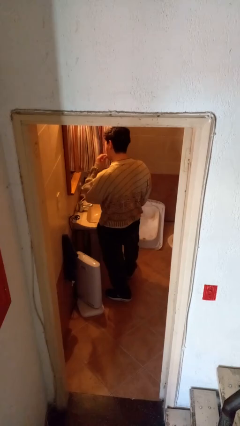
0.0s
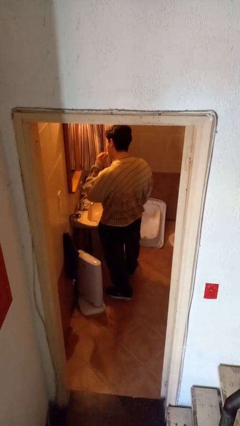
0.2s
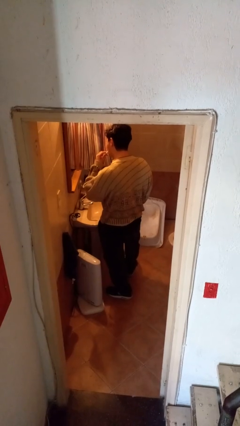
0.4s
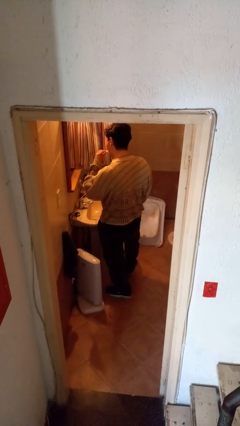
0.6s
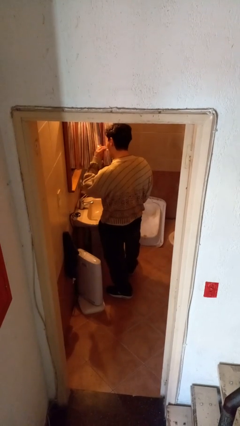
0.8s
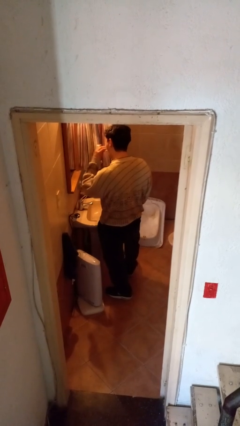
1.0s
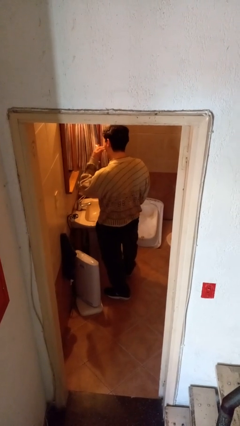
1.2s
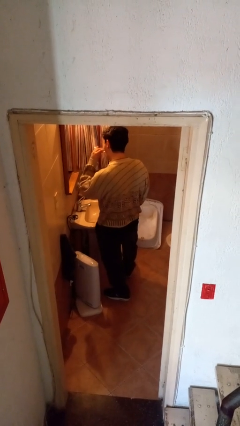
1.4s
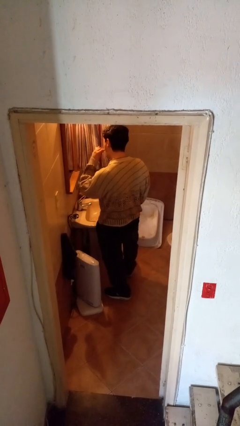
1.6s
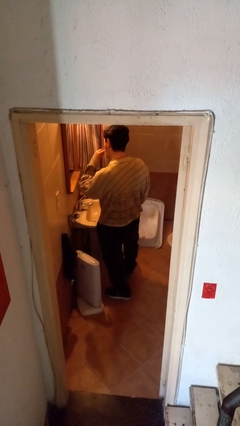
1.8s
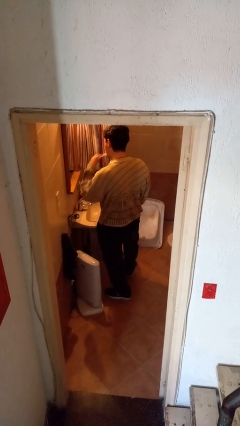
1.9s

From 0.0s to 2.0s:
person brushes teeth

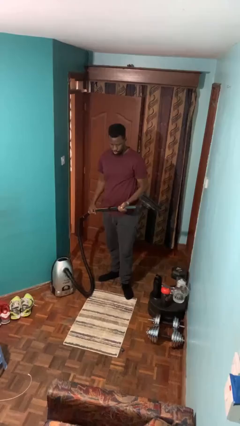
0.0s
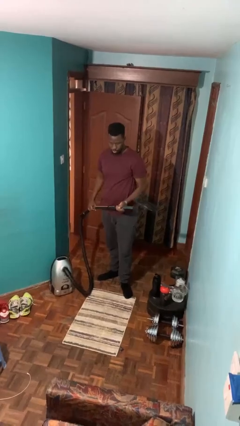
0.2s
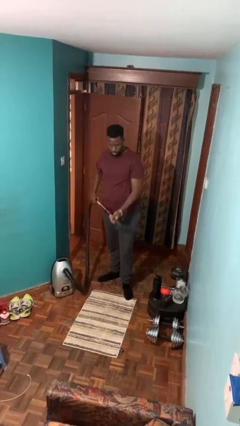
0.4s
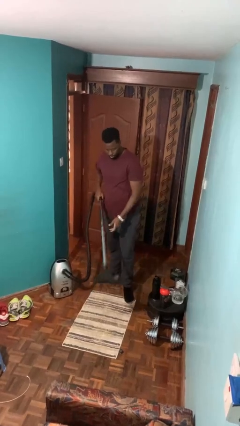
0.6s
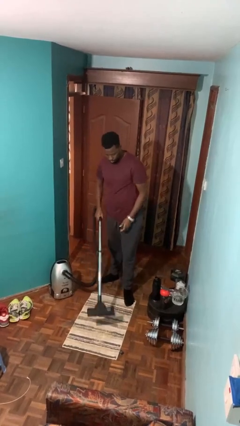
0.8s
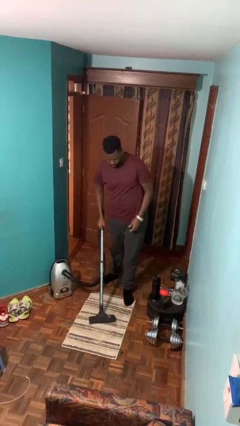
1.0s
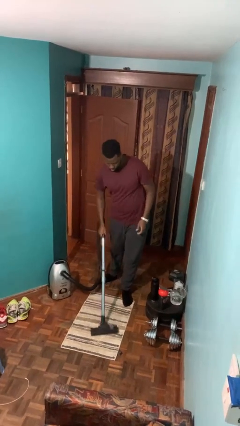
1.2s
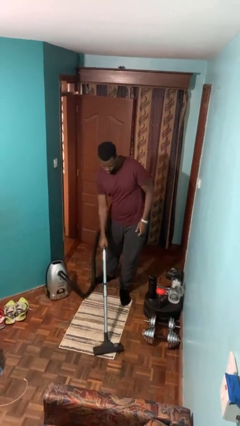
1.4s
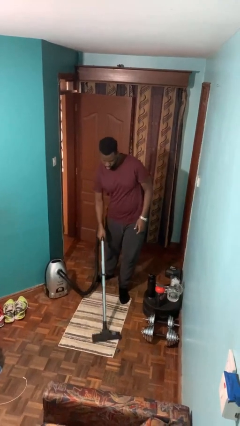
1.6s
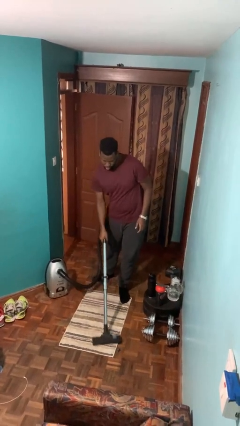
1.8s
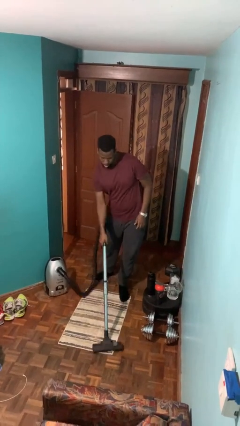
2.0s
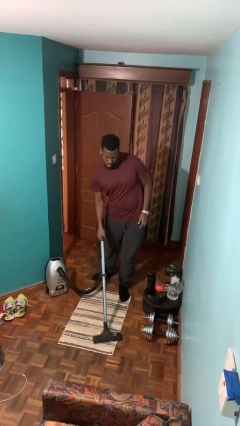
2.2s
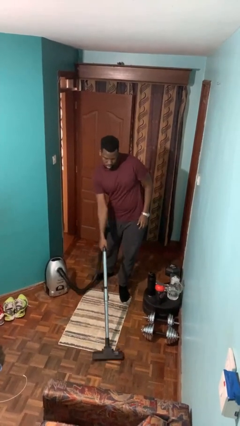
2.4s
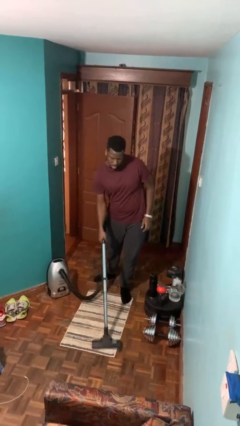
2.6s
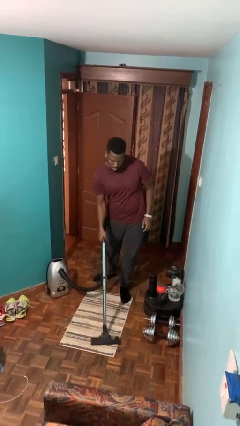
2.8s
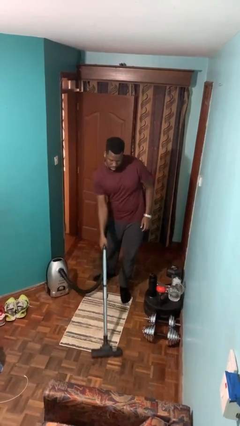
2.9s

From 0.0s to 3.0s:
person vacuums carpet

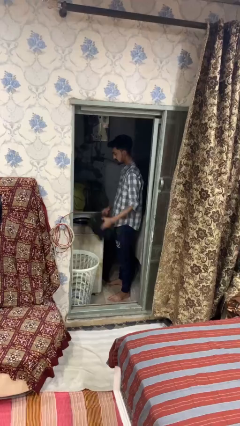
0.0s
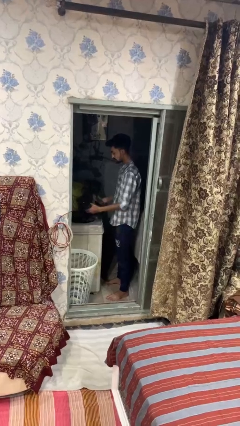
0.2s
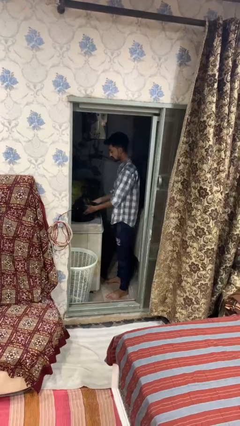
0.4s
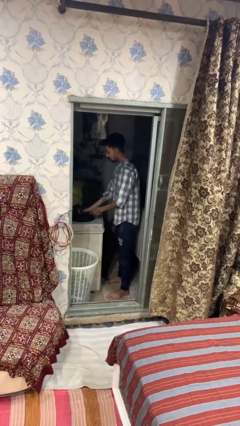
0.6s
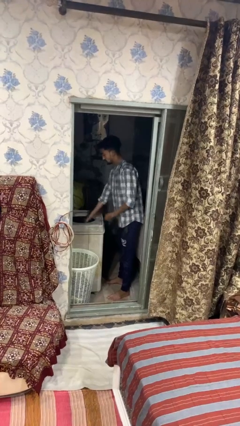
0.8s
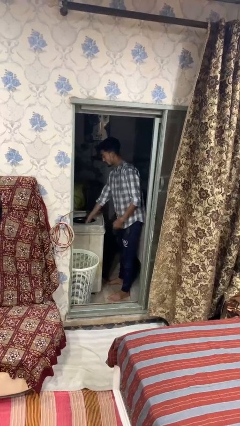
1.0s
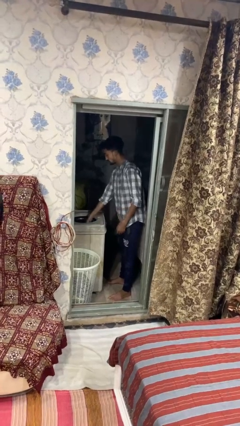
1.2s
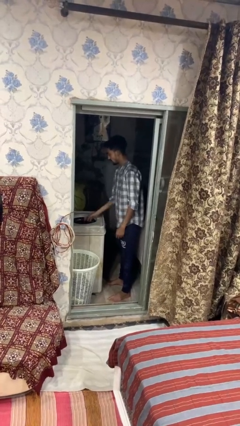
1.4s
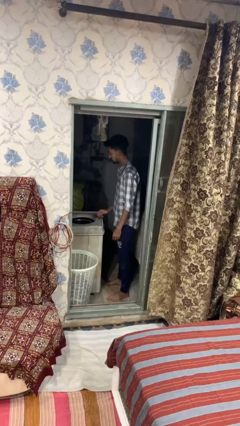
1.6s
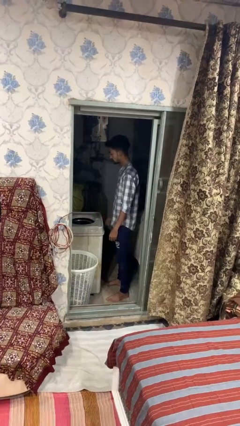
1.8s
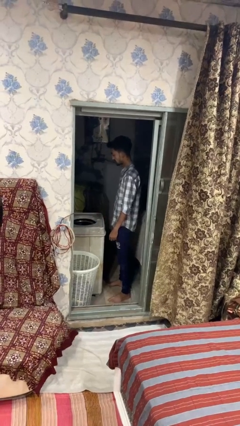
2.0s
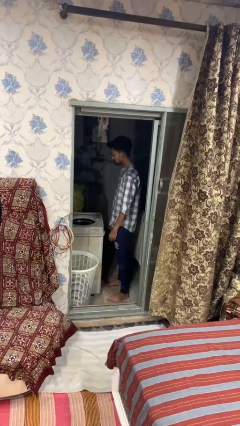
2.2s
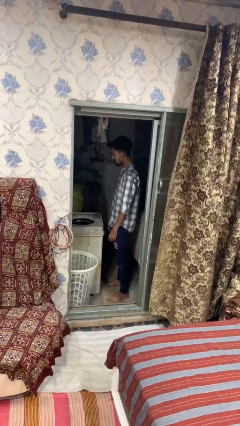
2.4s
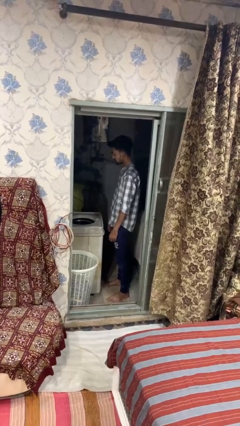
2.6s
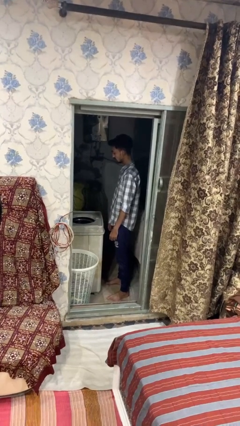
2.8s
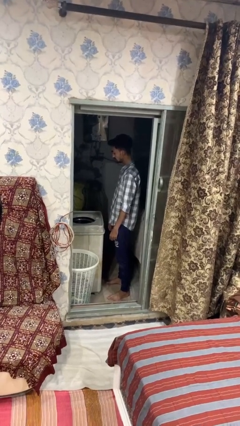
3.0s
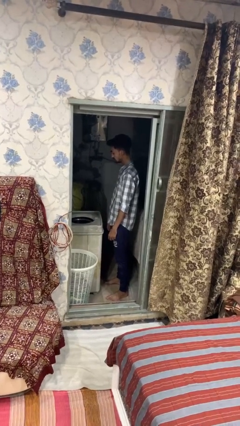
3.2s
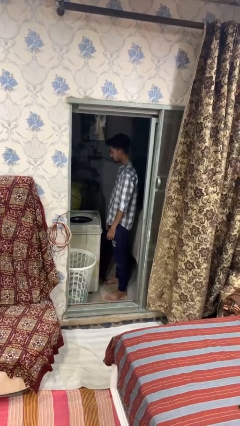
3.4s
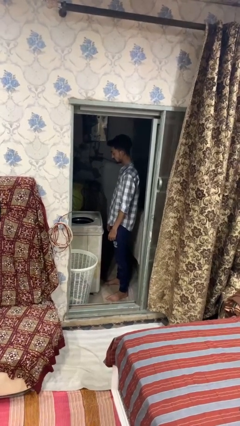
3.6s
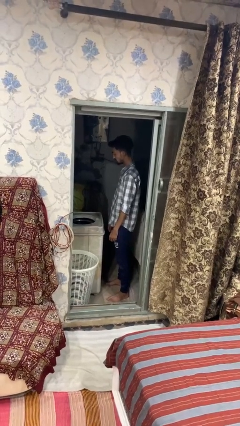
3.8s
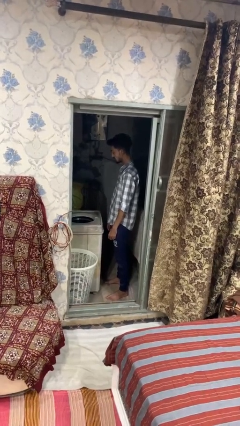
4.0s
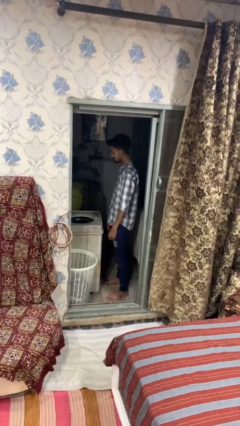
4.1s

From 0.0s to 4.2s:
person loads dryer

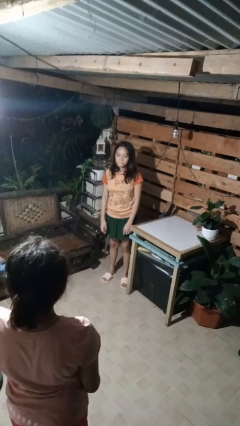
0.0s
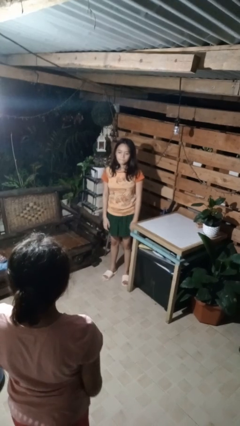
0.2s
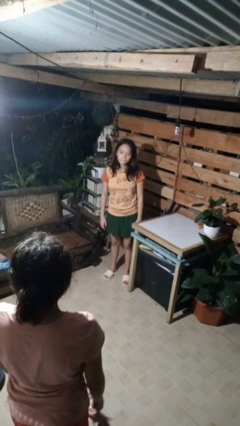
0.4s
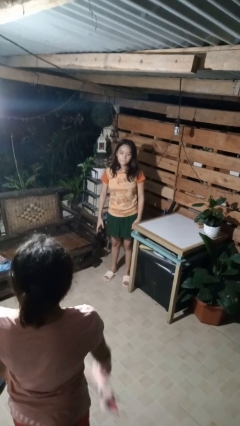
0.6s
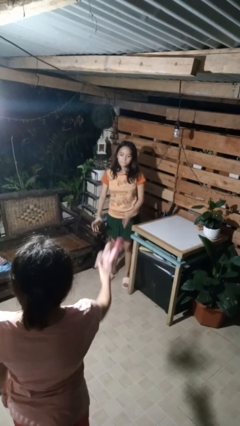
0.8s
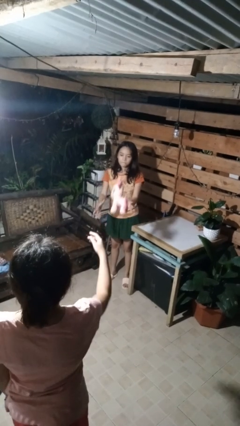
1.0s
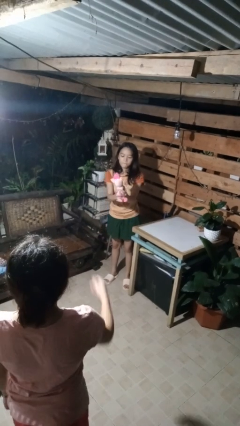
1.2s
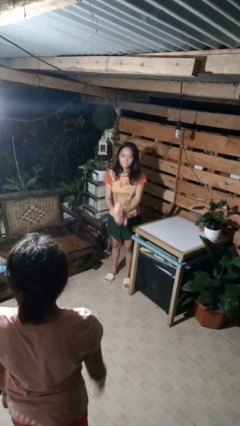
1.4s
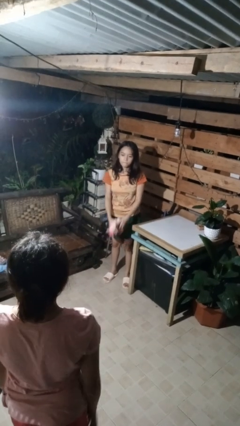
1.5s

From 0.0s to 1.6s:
person catches object from person

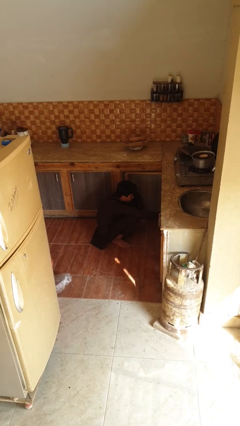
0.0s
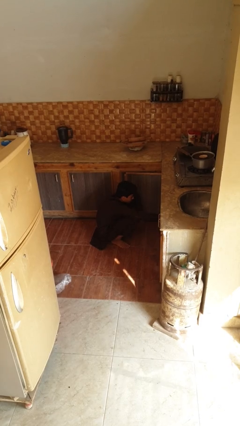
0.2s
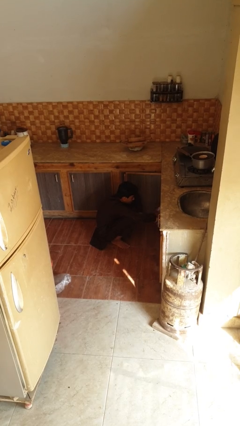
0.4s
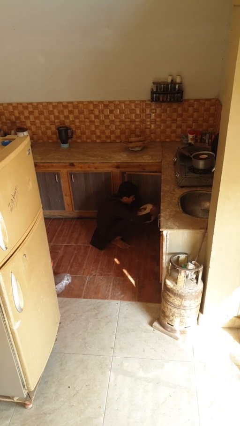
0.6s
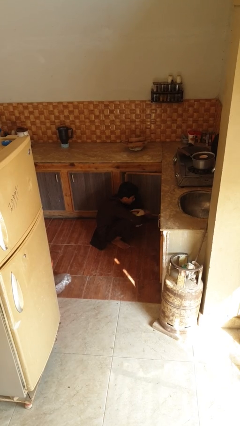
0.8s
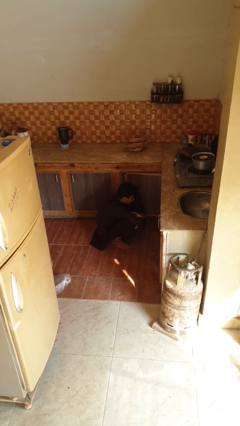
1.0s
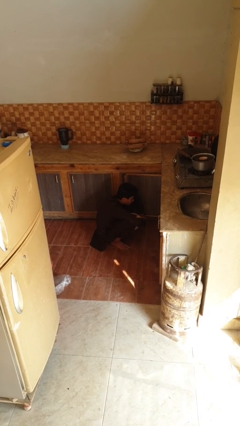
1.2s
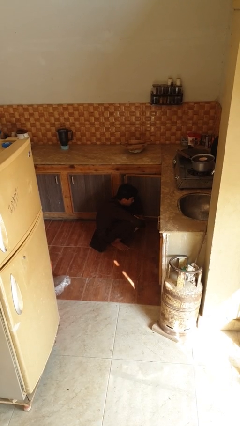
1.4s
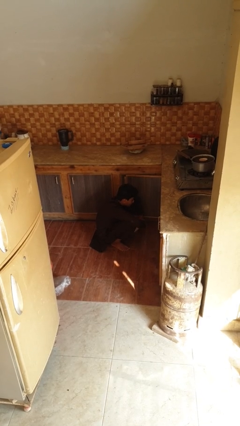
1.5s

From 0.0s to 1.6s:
person takes object from kitchen drawer

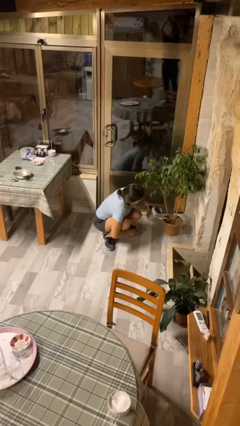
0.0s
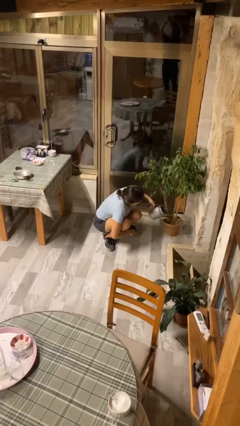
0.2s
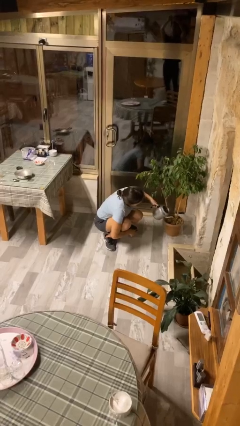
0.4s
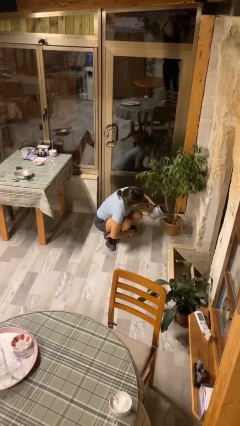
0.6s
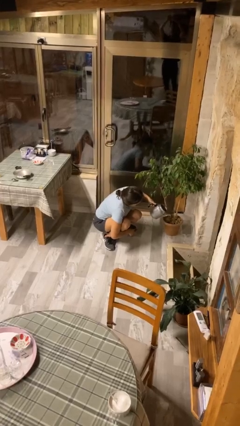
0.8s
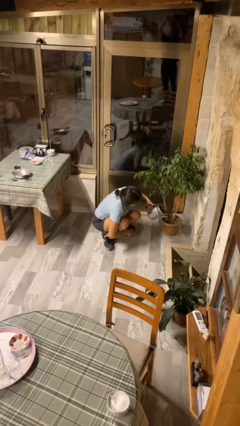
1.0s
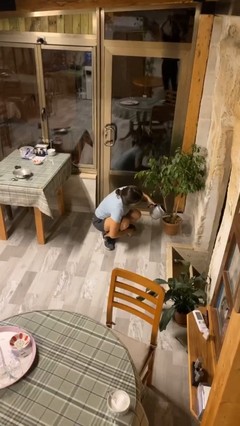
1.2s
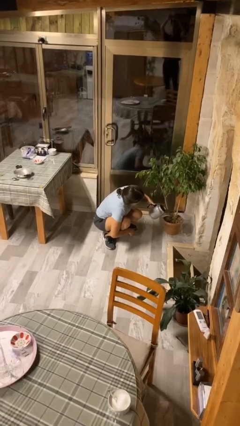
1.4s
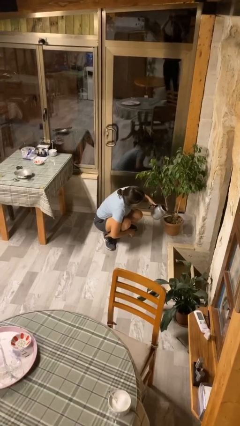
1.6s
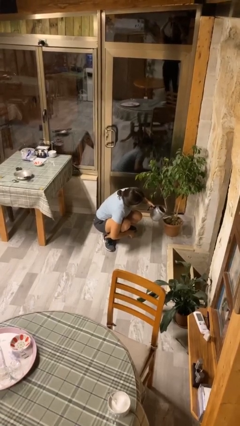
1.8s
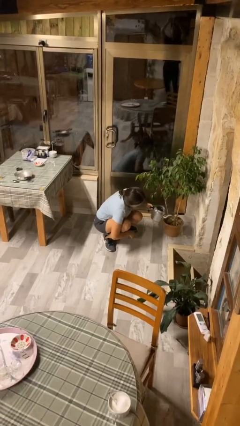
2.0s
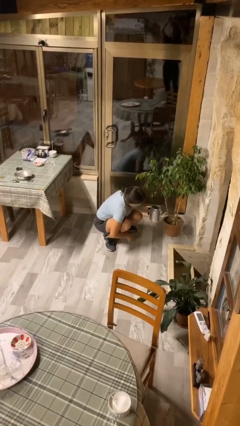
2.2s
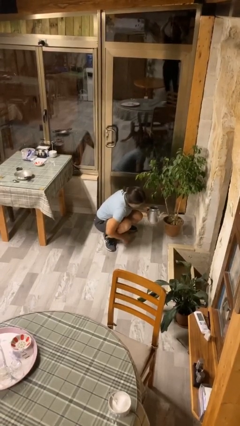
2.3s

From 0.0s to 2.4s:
person waters houseplant

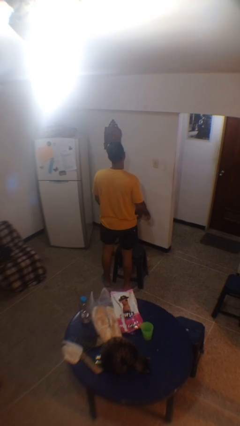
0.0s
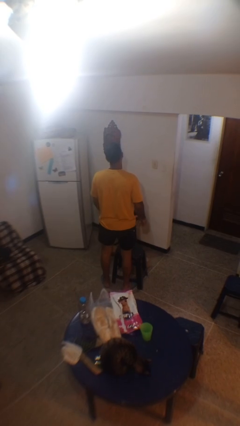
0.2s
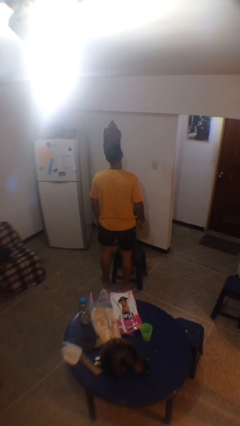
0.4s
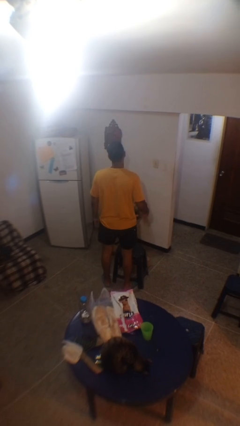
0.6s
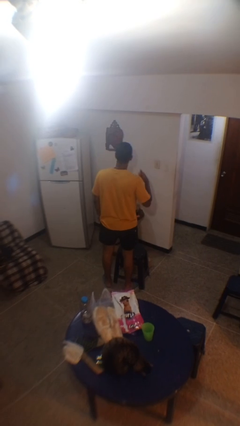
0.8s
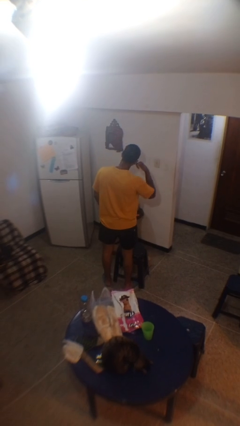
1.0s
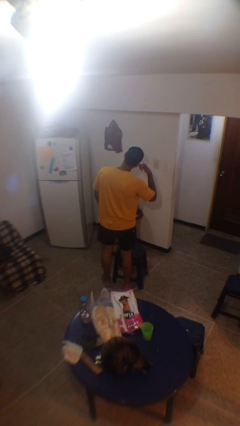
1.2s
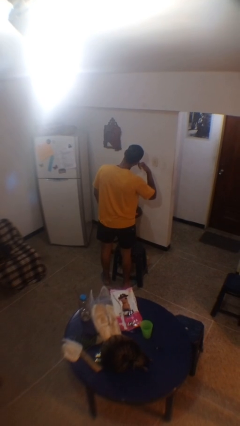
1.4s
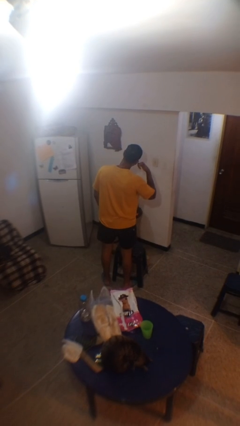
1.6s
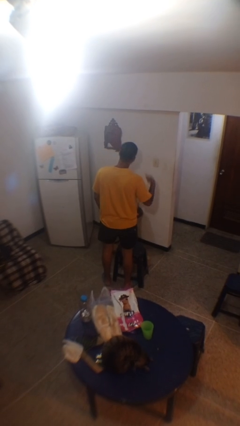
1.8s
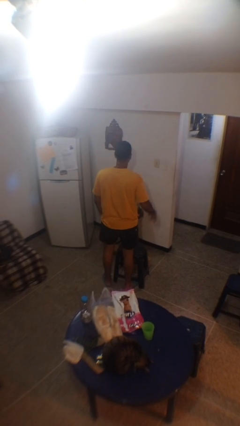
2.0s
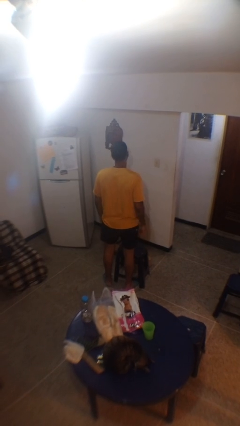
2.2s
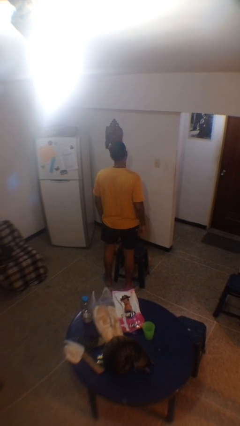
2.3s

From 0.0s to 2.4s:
person gestures call me
